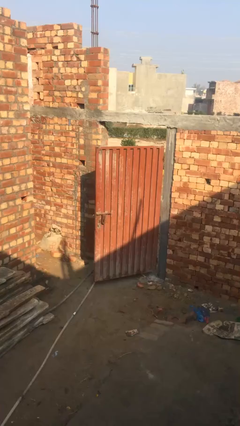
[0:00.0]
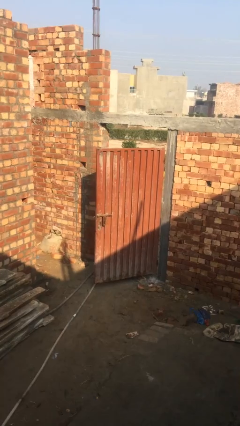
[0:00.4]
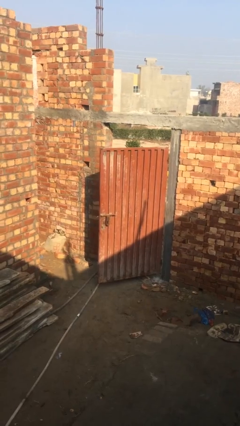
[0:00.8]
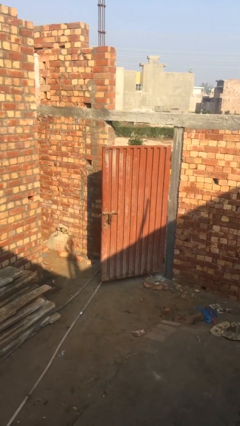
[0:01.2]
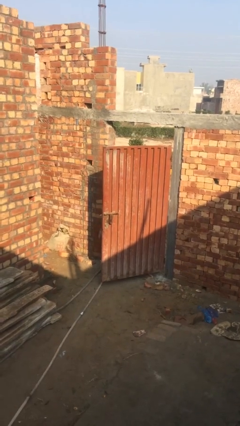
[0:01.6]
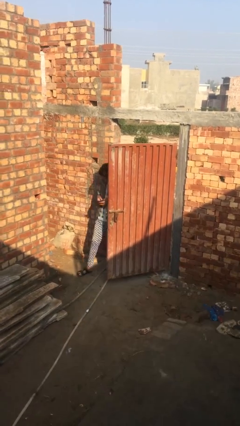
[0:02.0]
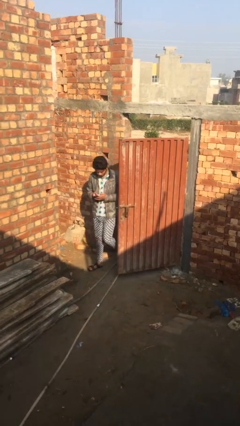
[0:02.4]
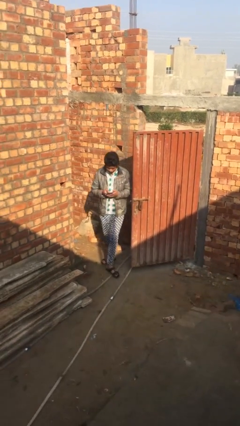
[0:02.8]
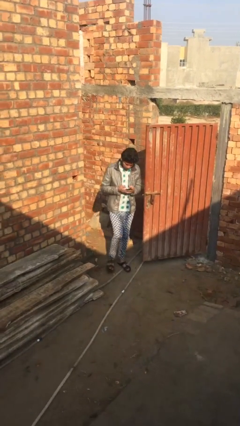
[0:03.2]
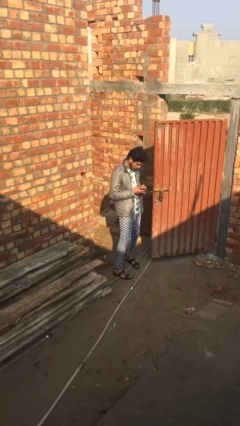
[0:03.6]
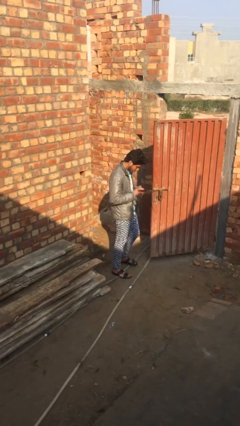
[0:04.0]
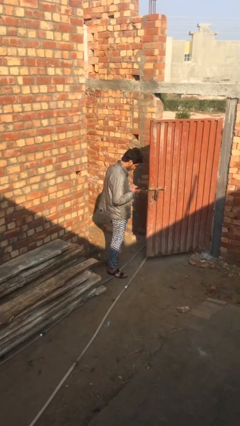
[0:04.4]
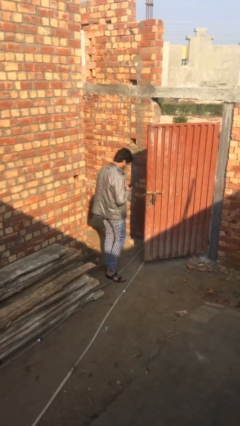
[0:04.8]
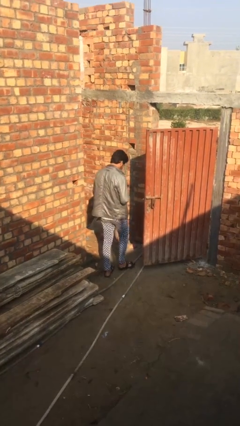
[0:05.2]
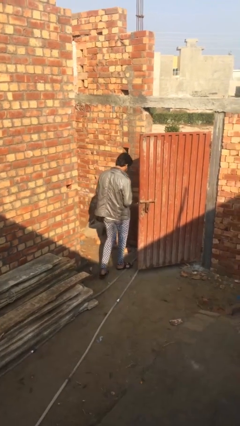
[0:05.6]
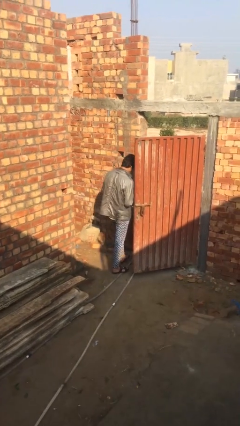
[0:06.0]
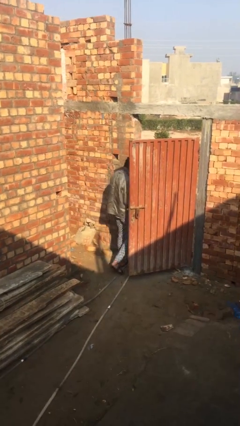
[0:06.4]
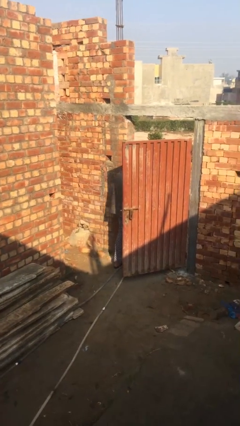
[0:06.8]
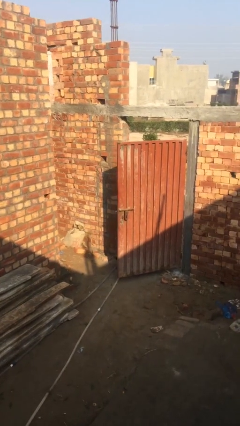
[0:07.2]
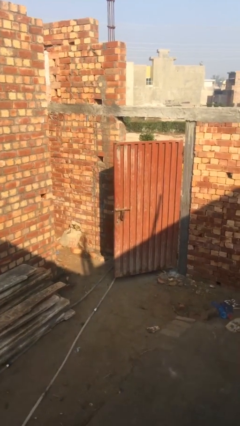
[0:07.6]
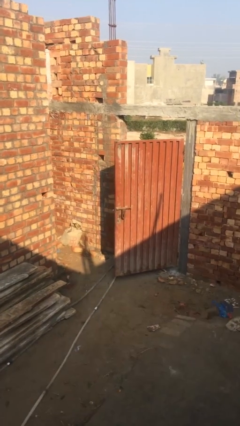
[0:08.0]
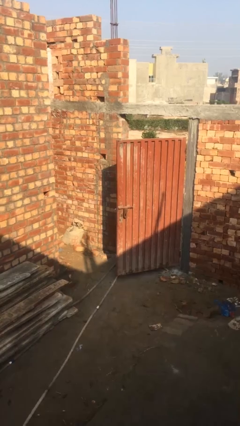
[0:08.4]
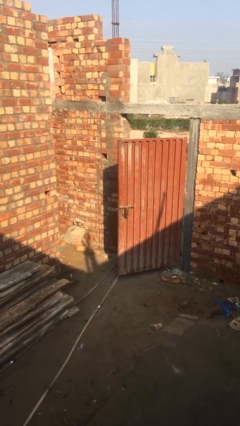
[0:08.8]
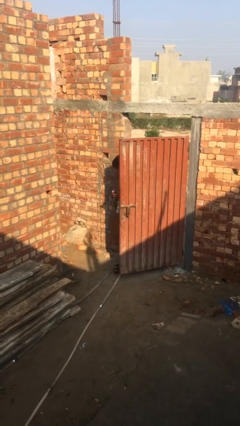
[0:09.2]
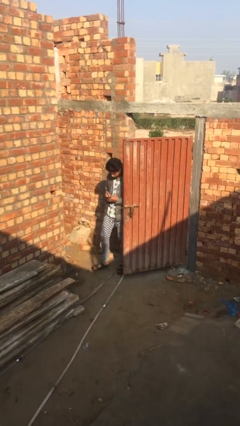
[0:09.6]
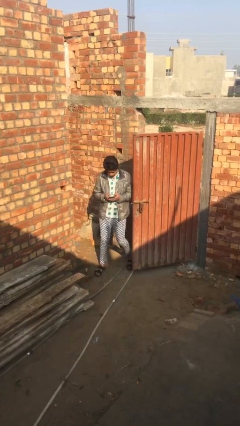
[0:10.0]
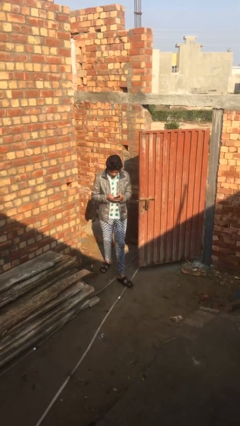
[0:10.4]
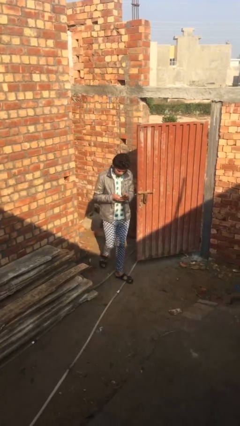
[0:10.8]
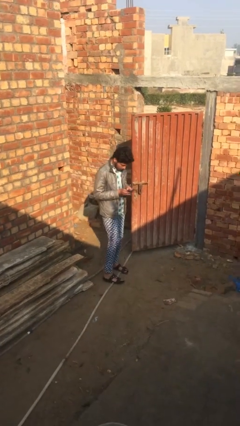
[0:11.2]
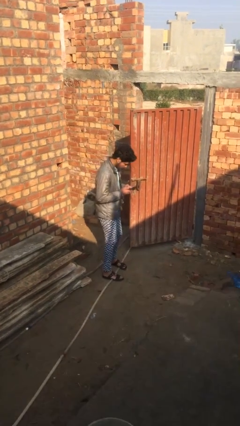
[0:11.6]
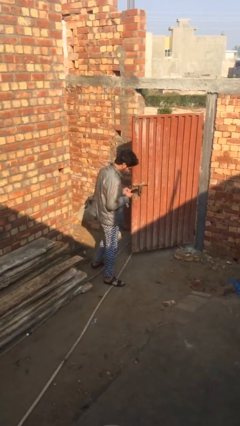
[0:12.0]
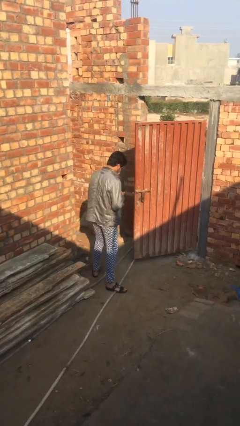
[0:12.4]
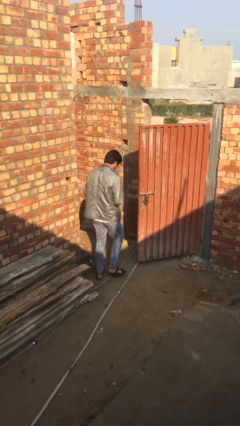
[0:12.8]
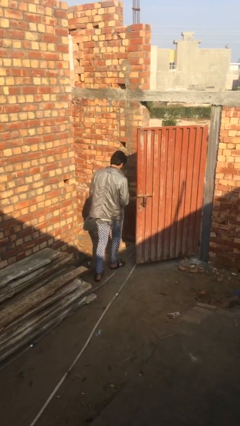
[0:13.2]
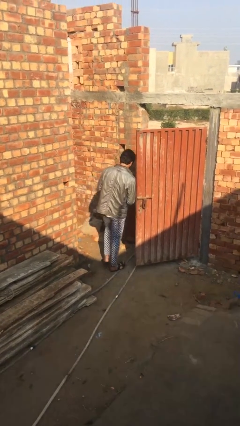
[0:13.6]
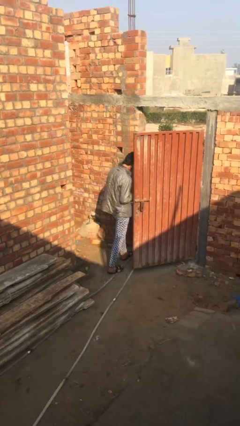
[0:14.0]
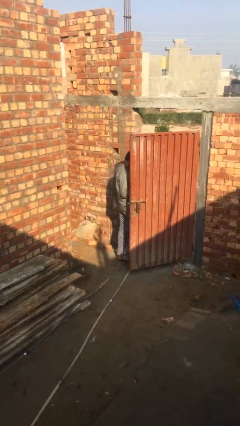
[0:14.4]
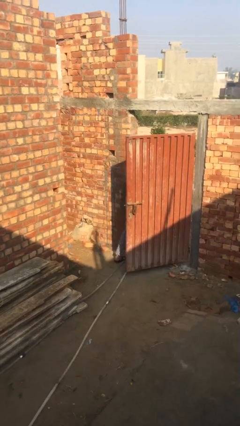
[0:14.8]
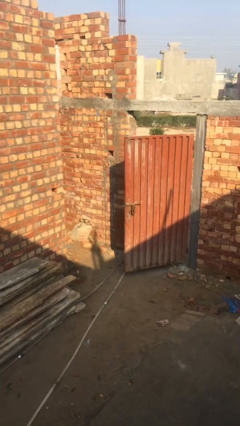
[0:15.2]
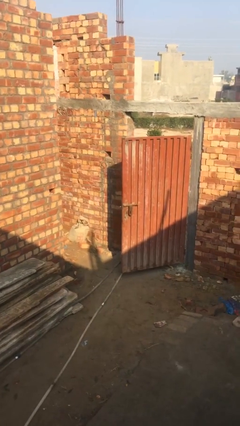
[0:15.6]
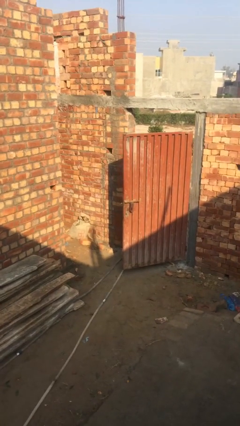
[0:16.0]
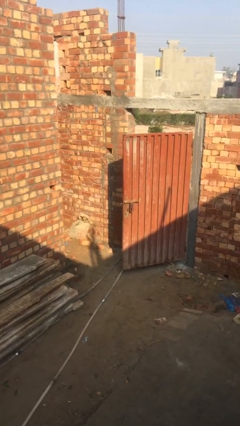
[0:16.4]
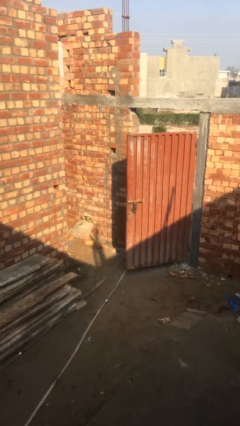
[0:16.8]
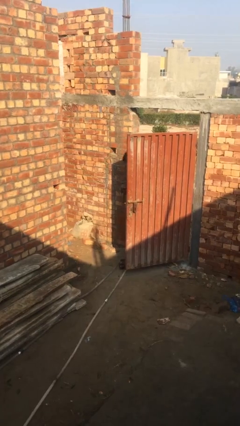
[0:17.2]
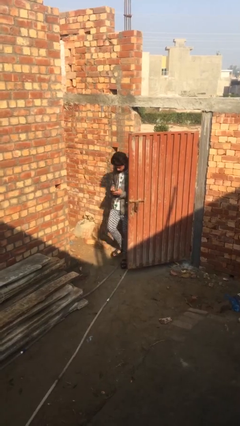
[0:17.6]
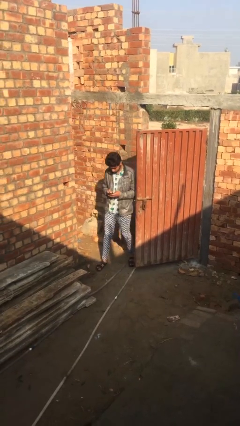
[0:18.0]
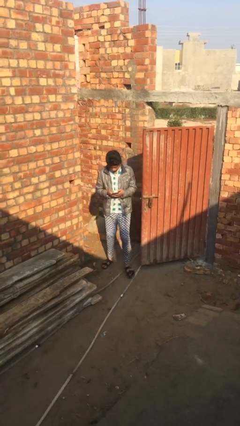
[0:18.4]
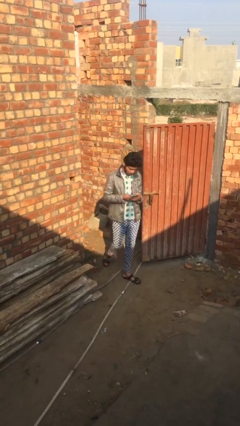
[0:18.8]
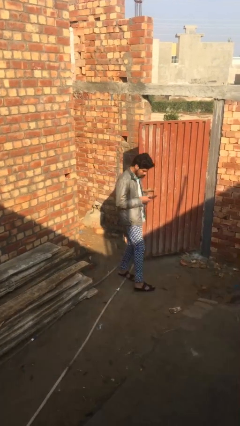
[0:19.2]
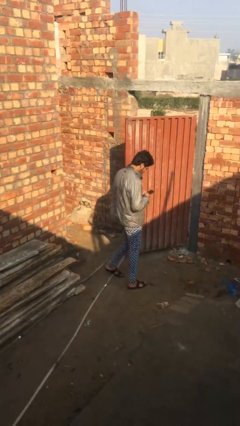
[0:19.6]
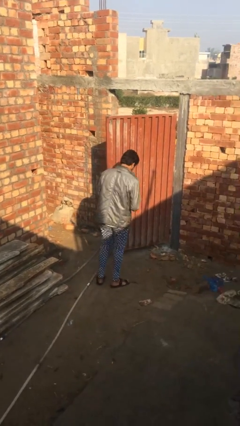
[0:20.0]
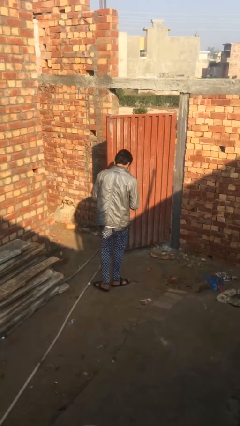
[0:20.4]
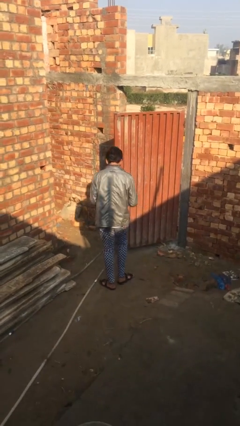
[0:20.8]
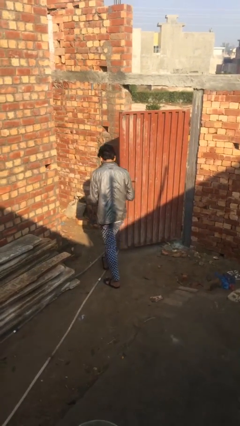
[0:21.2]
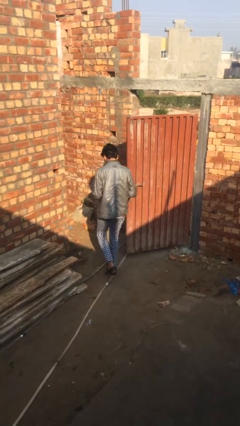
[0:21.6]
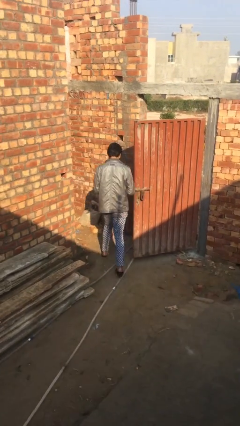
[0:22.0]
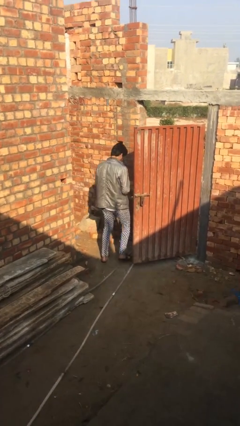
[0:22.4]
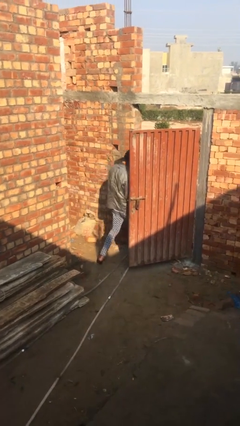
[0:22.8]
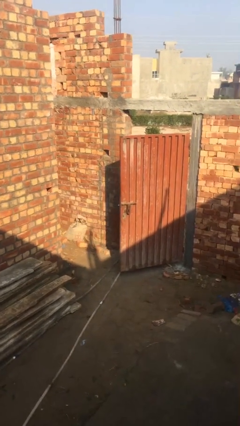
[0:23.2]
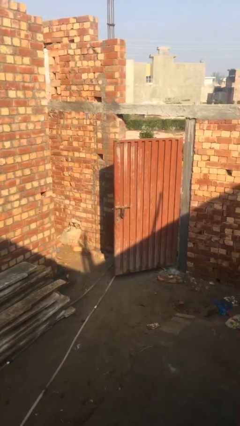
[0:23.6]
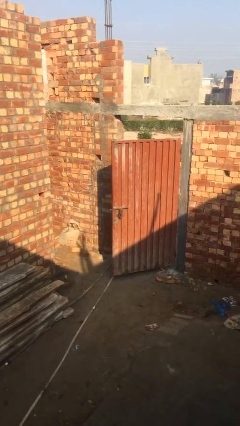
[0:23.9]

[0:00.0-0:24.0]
person texts on phone

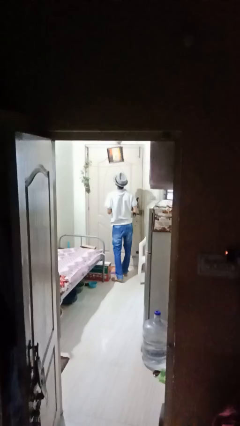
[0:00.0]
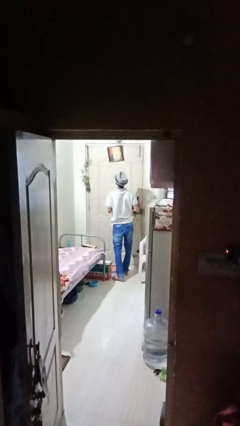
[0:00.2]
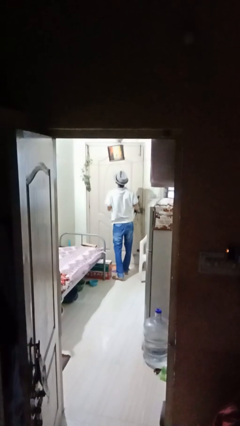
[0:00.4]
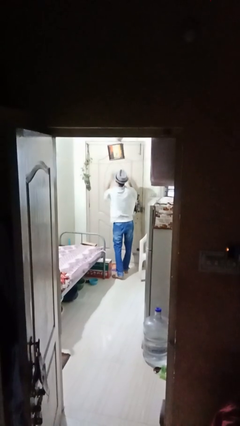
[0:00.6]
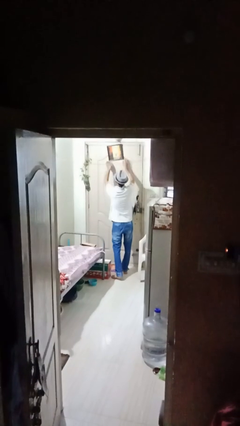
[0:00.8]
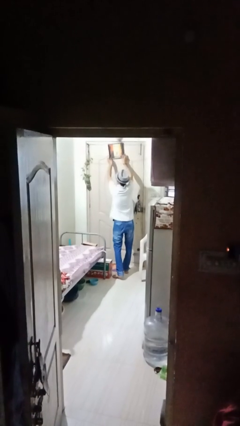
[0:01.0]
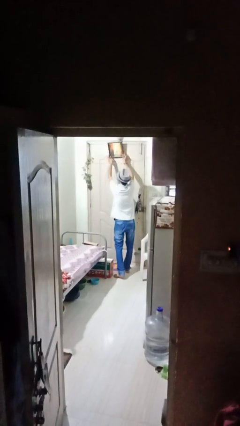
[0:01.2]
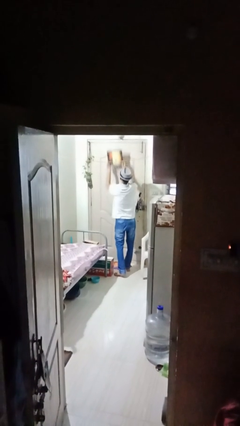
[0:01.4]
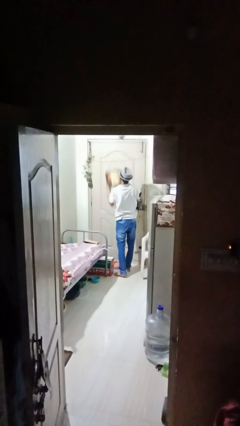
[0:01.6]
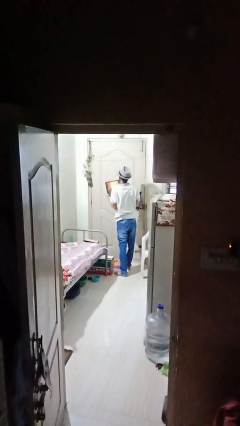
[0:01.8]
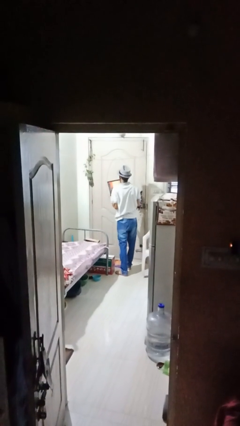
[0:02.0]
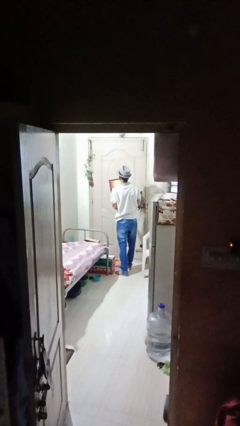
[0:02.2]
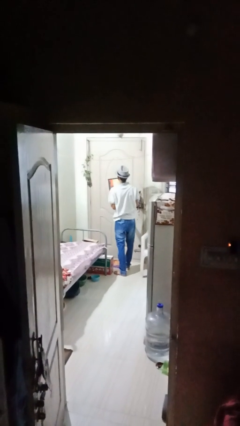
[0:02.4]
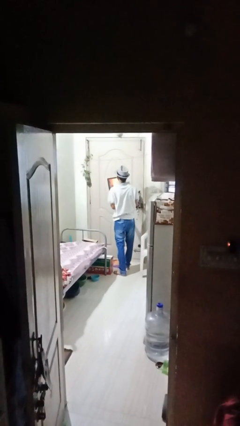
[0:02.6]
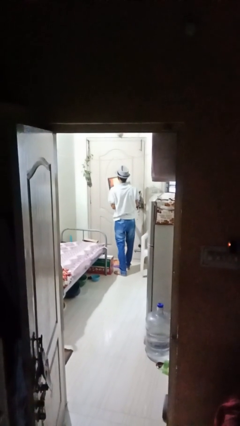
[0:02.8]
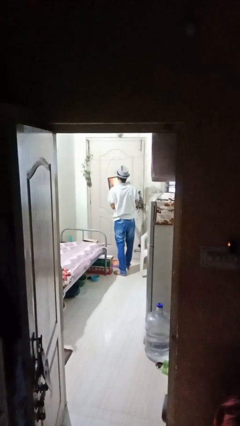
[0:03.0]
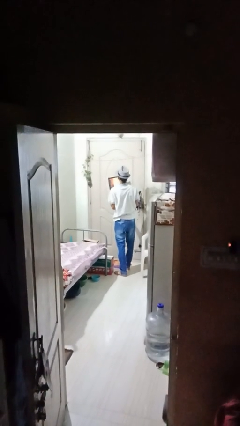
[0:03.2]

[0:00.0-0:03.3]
person takes down picture frame

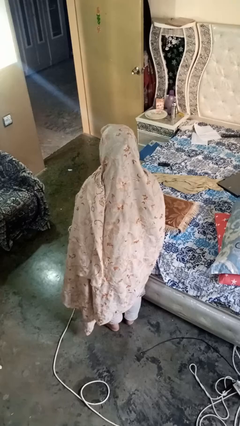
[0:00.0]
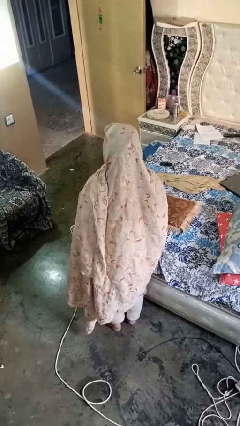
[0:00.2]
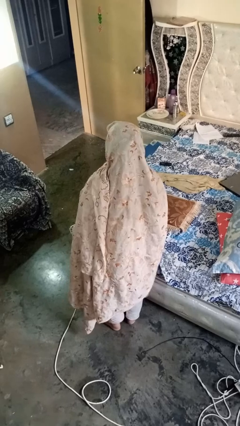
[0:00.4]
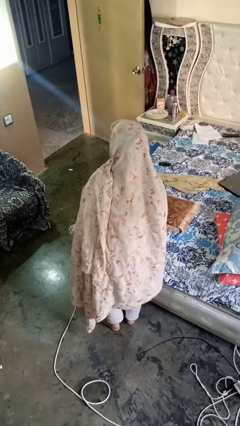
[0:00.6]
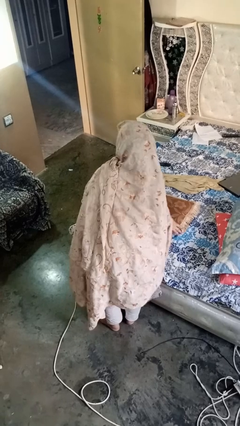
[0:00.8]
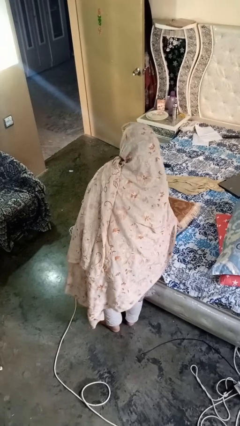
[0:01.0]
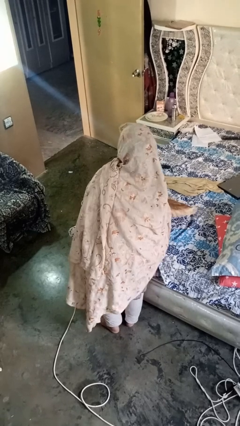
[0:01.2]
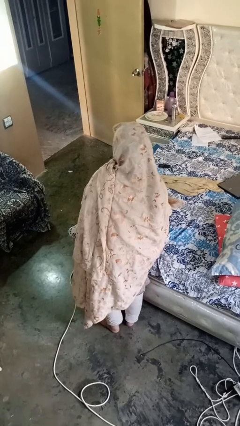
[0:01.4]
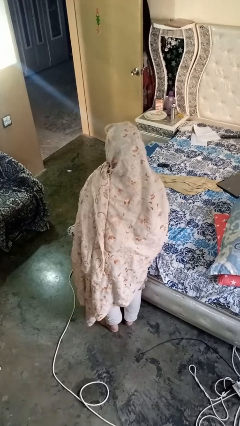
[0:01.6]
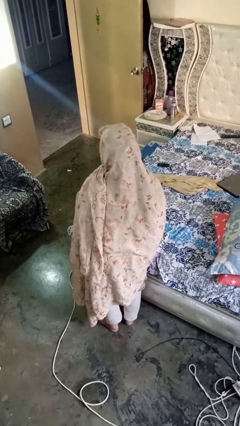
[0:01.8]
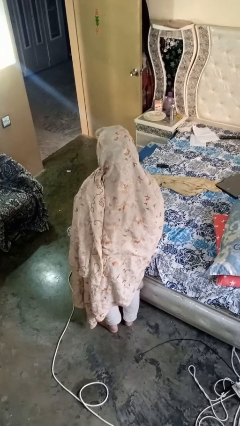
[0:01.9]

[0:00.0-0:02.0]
person picks up object from bed

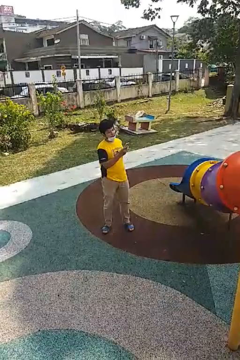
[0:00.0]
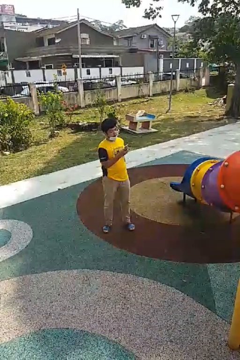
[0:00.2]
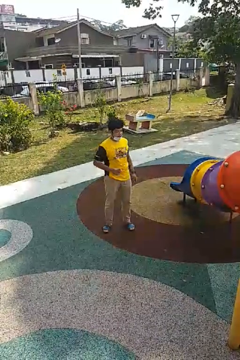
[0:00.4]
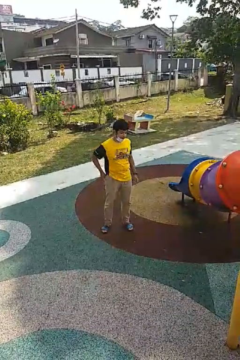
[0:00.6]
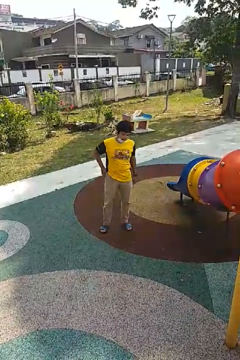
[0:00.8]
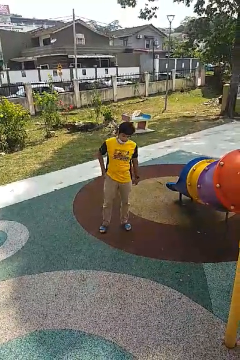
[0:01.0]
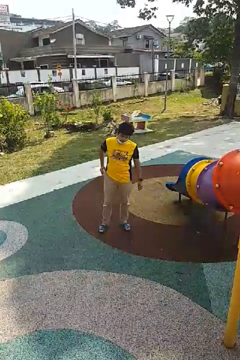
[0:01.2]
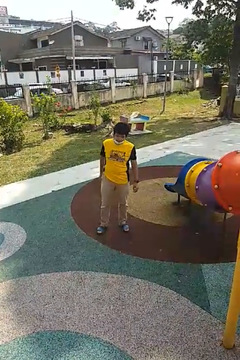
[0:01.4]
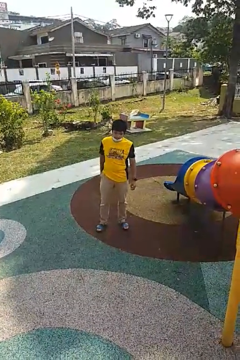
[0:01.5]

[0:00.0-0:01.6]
person puts phone into pocket
